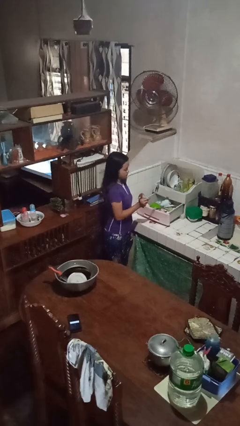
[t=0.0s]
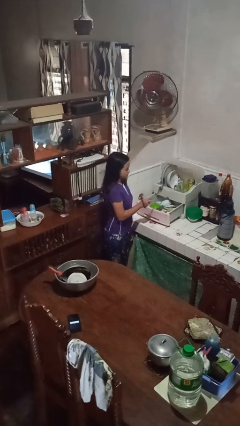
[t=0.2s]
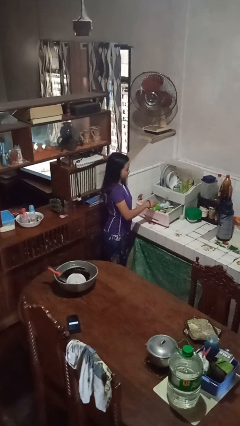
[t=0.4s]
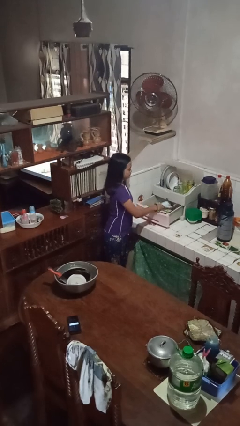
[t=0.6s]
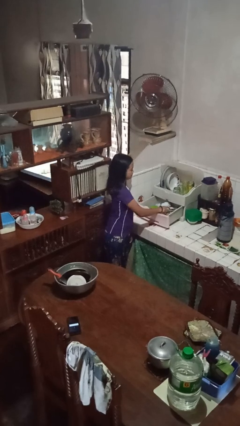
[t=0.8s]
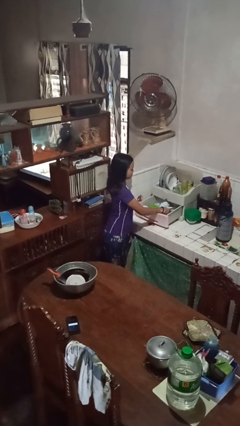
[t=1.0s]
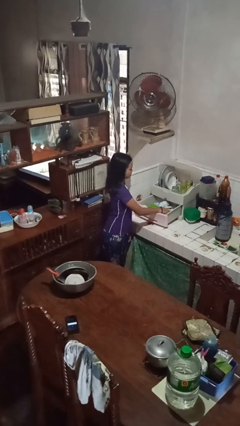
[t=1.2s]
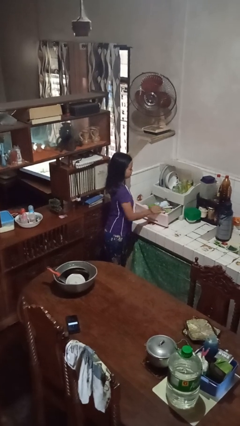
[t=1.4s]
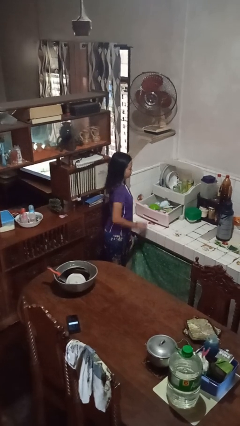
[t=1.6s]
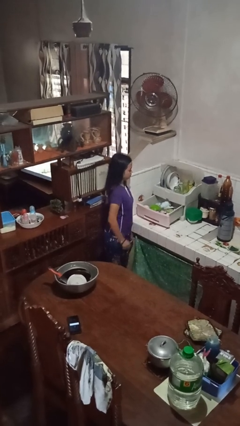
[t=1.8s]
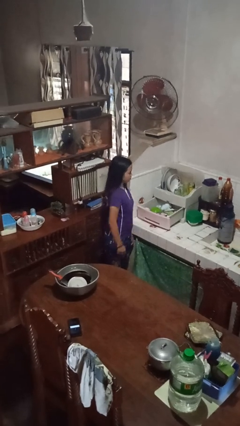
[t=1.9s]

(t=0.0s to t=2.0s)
person puts object into kitchen drawer

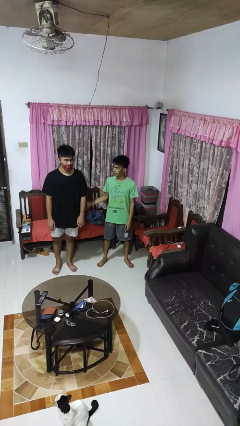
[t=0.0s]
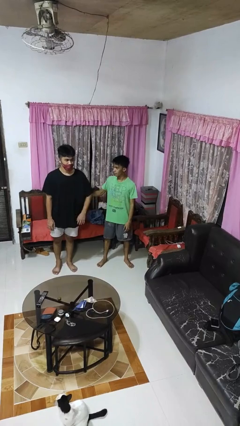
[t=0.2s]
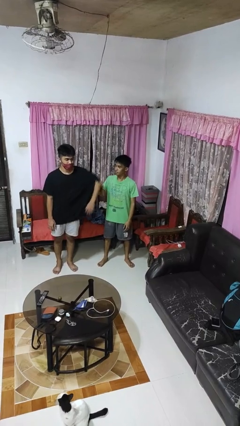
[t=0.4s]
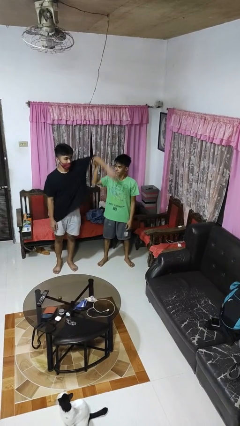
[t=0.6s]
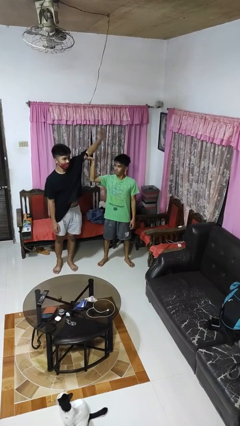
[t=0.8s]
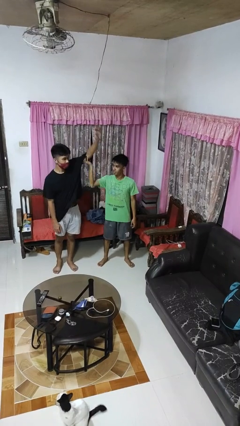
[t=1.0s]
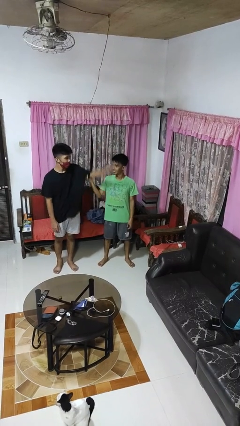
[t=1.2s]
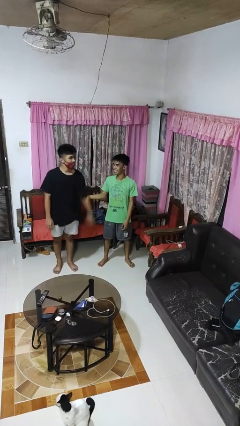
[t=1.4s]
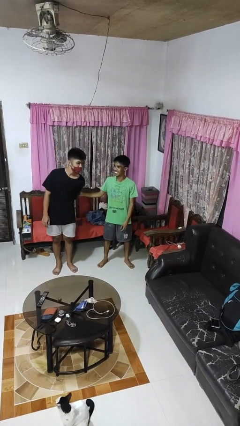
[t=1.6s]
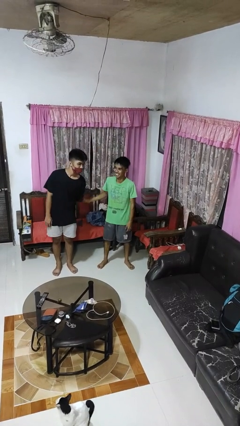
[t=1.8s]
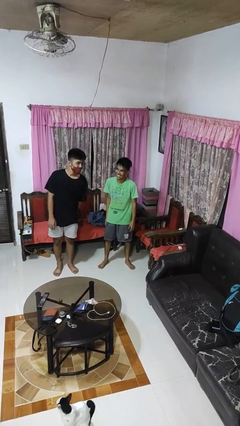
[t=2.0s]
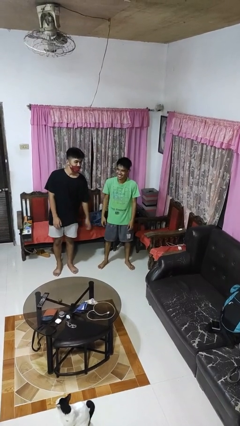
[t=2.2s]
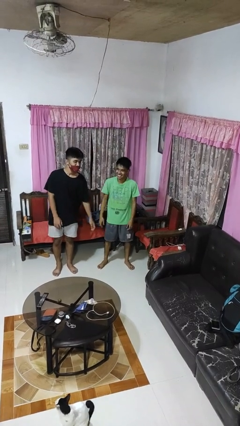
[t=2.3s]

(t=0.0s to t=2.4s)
person grabs person by bicep

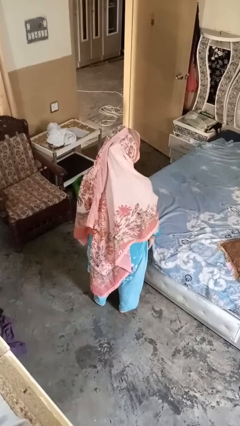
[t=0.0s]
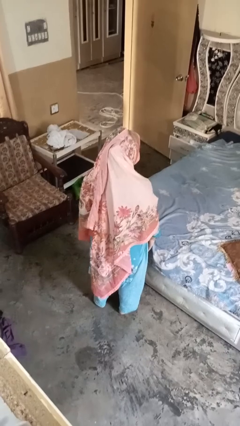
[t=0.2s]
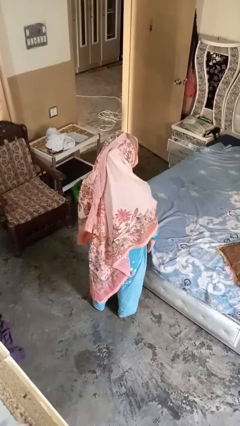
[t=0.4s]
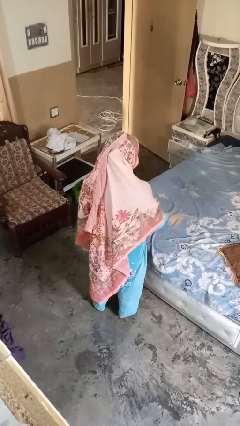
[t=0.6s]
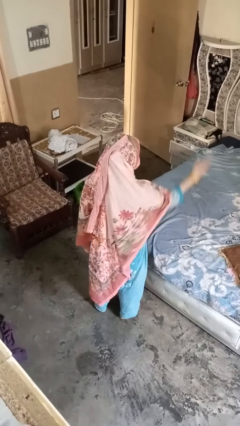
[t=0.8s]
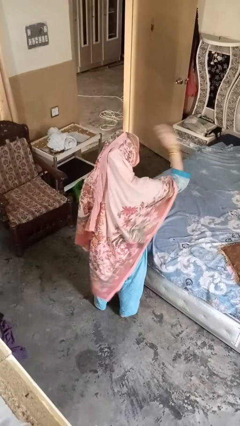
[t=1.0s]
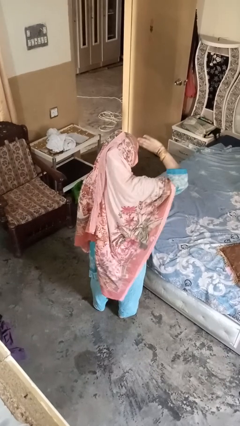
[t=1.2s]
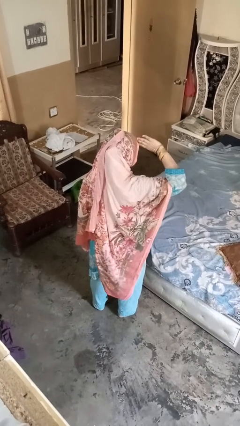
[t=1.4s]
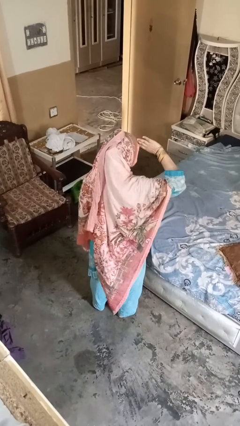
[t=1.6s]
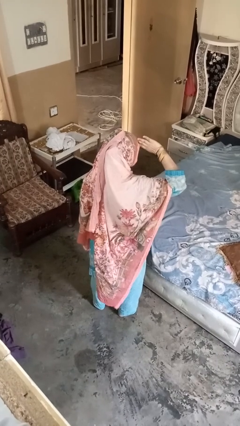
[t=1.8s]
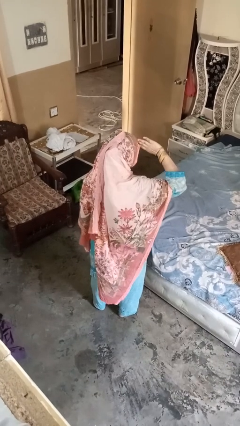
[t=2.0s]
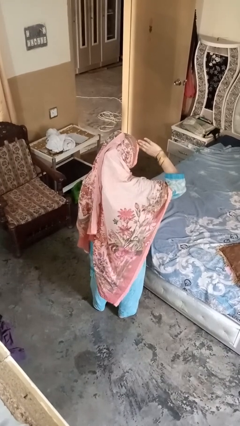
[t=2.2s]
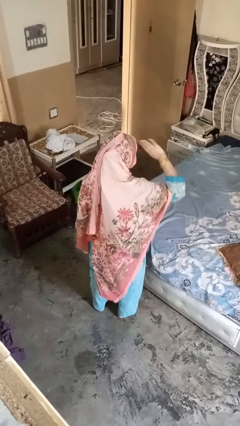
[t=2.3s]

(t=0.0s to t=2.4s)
person salutes

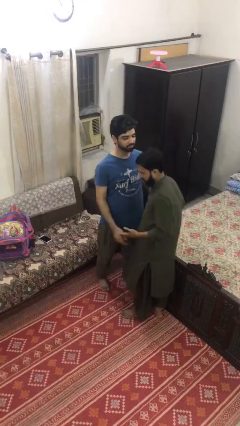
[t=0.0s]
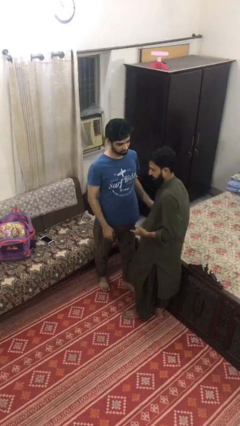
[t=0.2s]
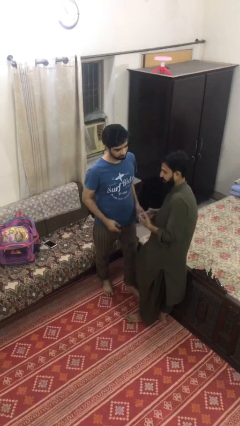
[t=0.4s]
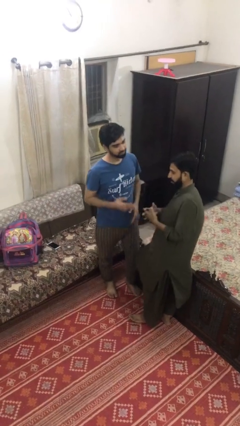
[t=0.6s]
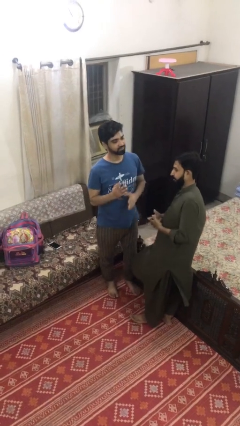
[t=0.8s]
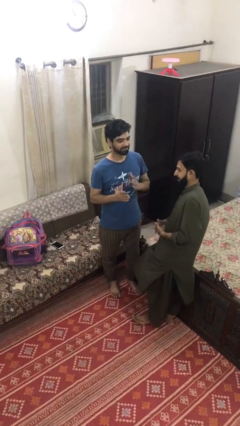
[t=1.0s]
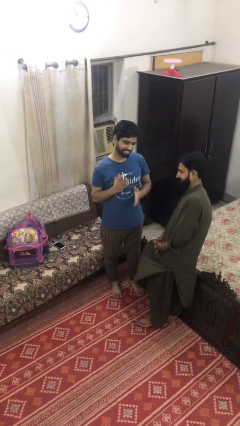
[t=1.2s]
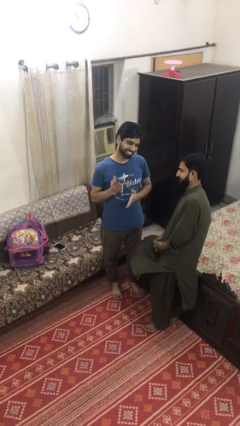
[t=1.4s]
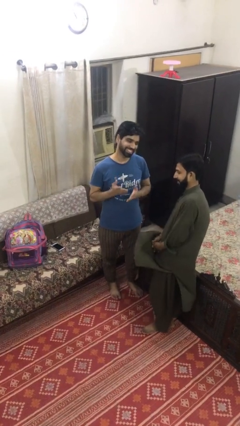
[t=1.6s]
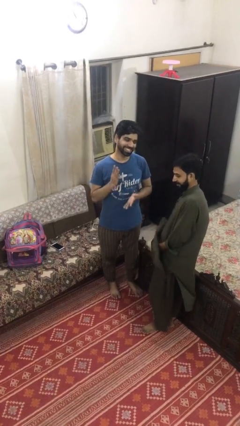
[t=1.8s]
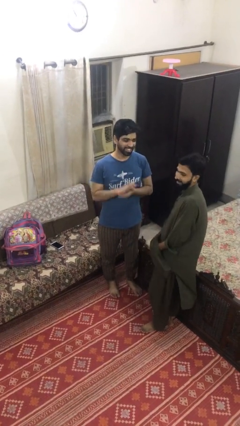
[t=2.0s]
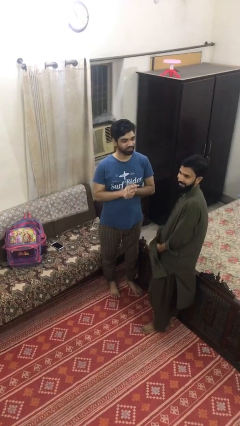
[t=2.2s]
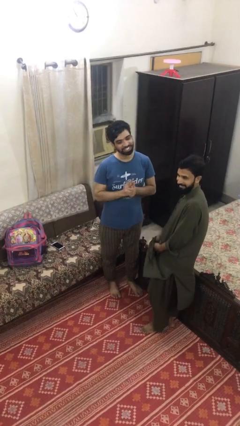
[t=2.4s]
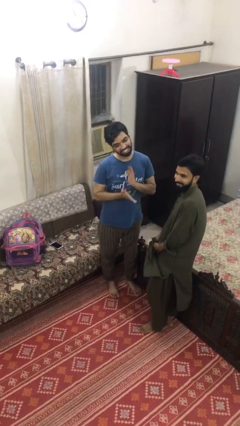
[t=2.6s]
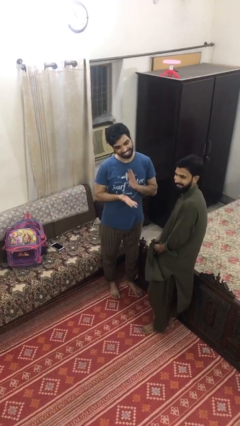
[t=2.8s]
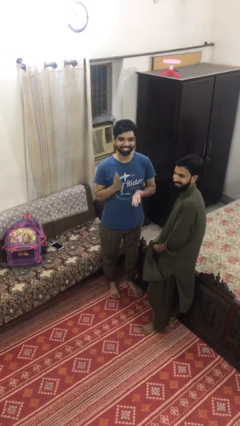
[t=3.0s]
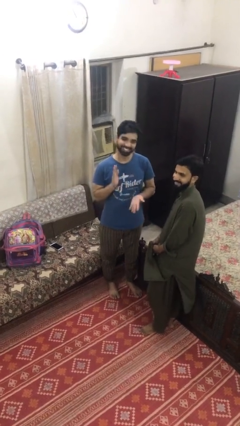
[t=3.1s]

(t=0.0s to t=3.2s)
person talks to person

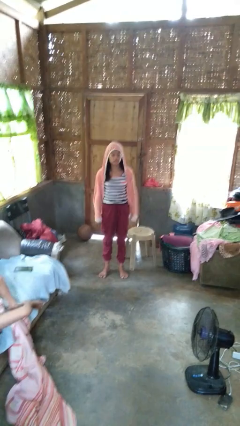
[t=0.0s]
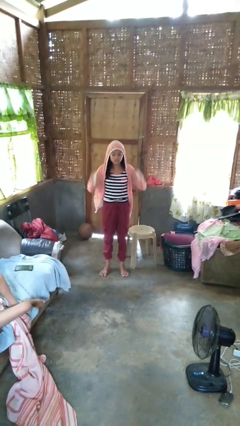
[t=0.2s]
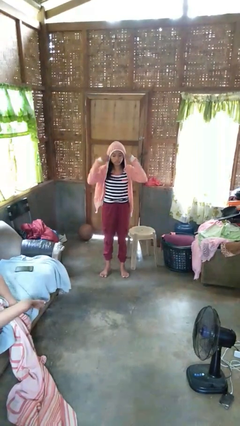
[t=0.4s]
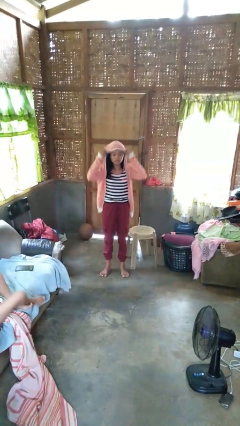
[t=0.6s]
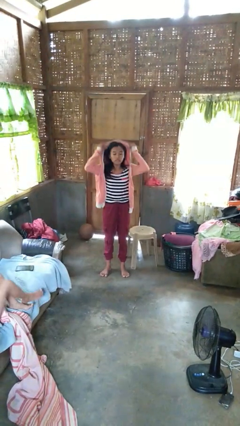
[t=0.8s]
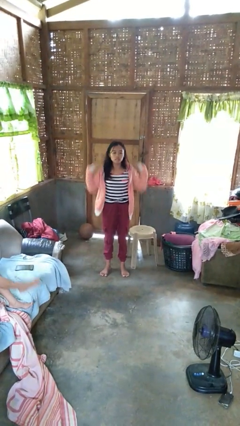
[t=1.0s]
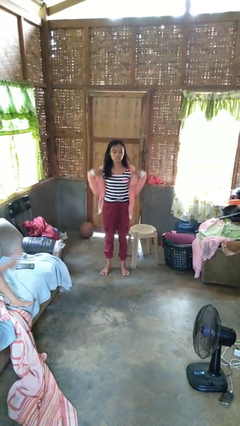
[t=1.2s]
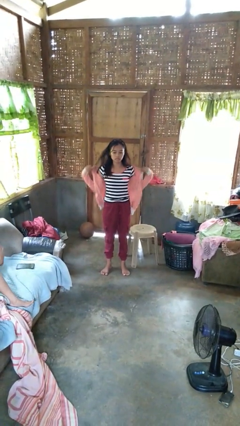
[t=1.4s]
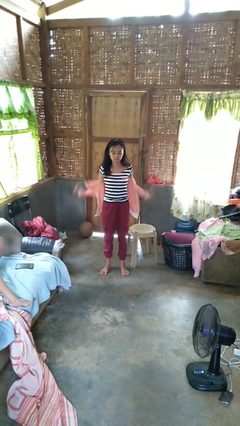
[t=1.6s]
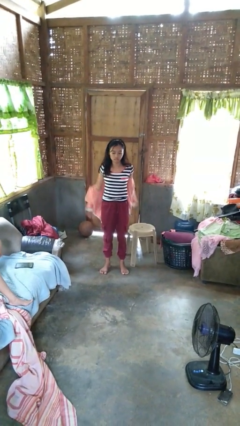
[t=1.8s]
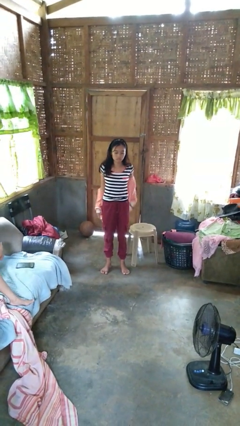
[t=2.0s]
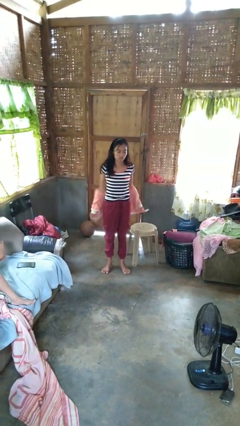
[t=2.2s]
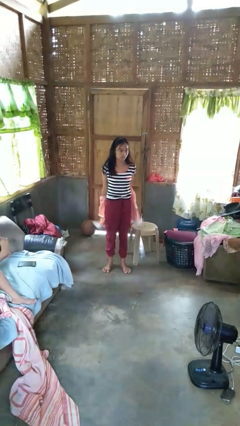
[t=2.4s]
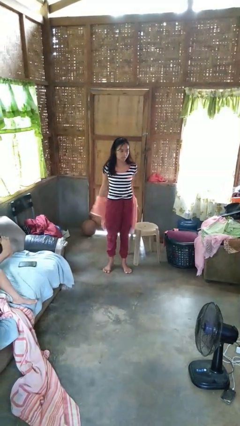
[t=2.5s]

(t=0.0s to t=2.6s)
person takes off hoodie

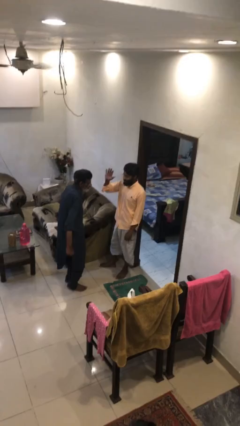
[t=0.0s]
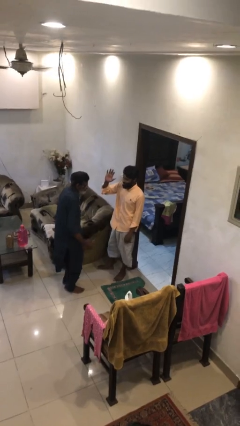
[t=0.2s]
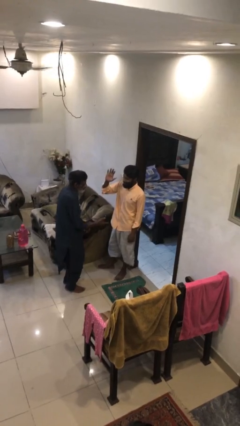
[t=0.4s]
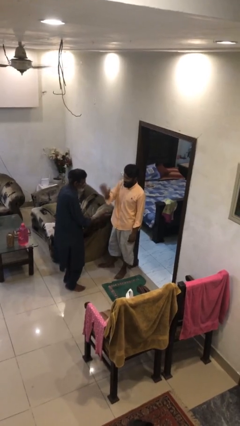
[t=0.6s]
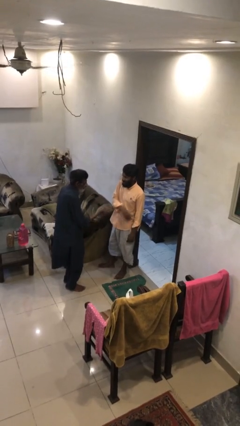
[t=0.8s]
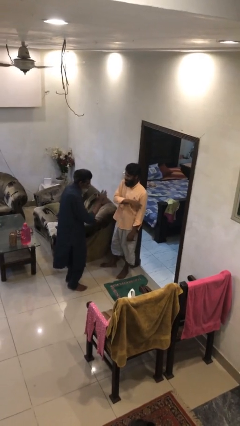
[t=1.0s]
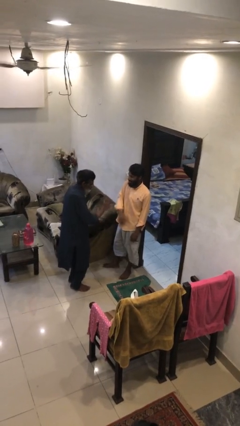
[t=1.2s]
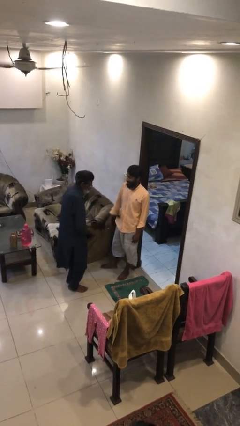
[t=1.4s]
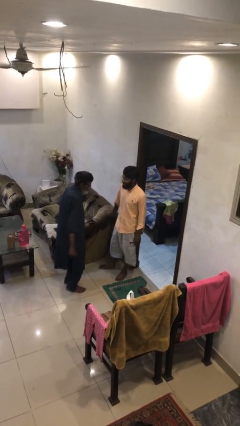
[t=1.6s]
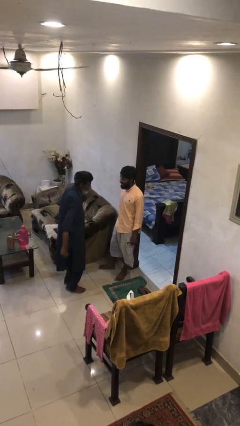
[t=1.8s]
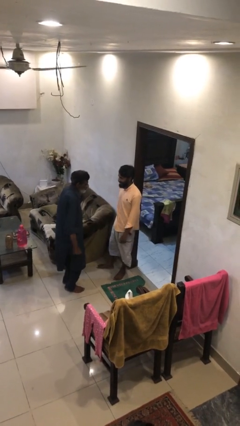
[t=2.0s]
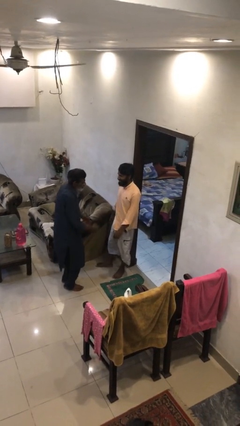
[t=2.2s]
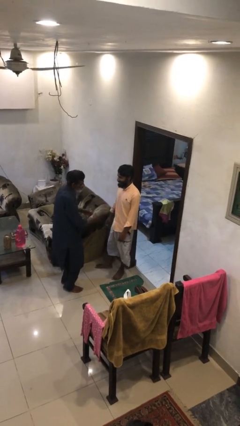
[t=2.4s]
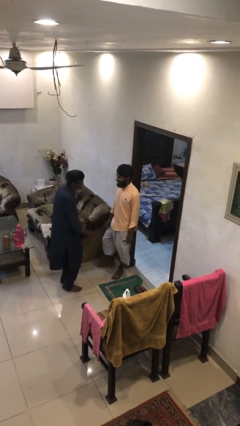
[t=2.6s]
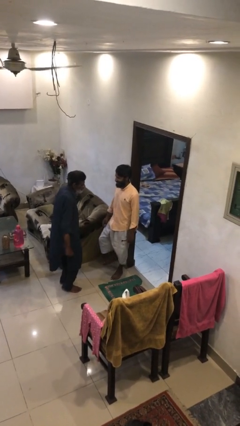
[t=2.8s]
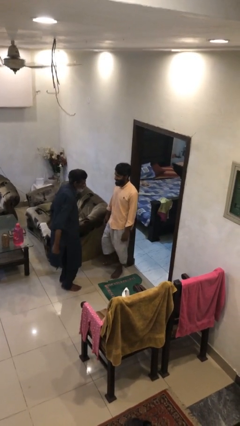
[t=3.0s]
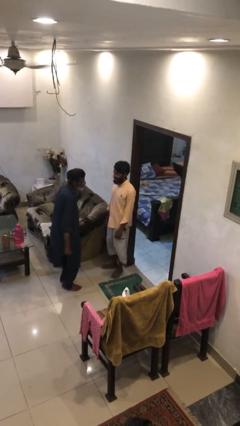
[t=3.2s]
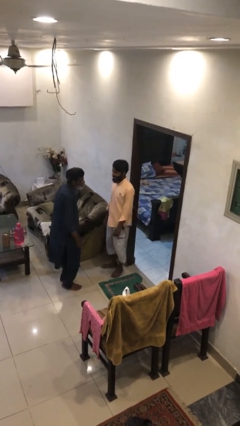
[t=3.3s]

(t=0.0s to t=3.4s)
person highfives hand

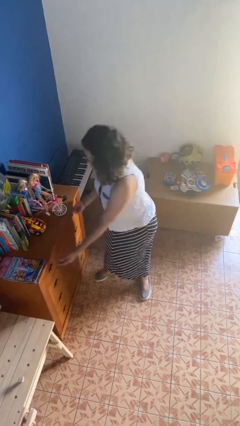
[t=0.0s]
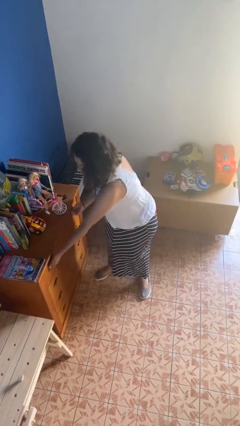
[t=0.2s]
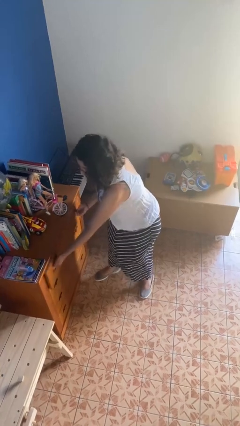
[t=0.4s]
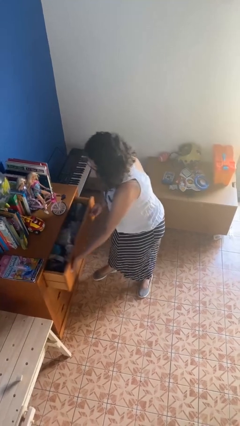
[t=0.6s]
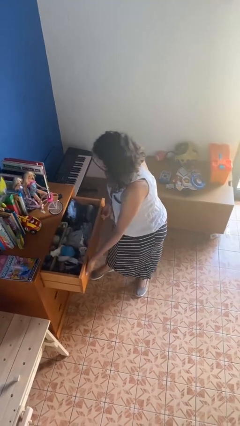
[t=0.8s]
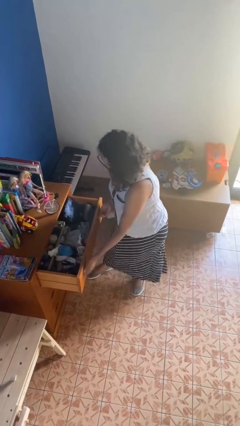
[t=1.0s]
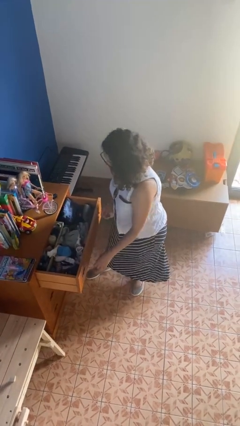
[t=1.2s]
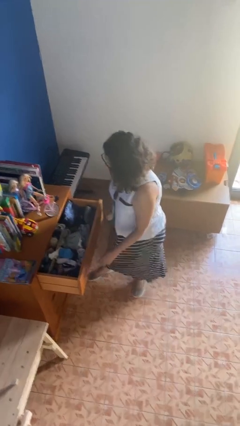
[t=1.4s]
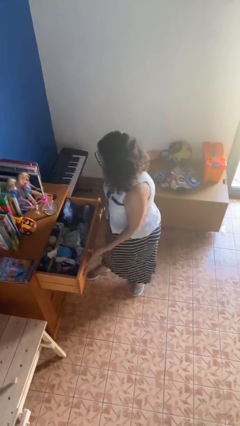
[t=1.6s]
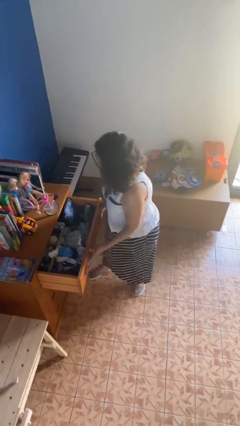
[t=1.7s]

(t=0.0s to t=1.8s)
person opens dresser drawer
